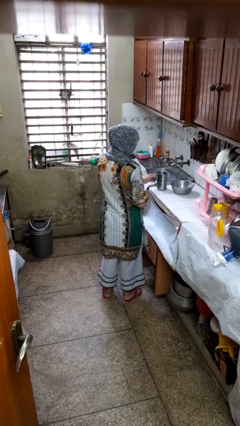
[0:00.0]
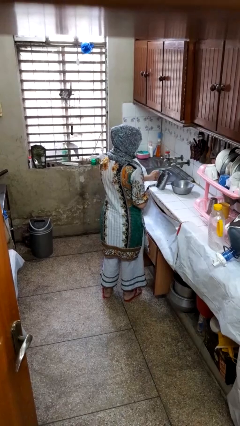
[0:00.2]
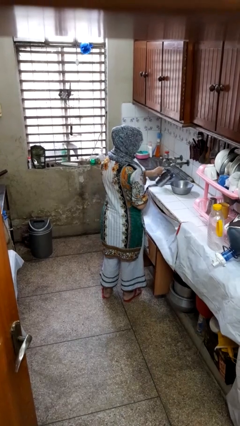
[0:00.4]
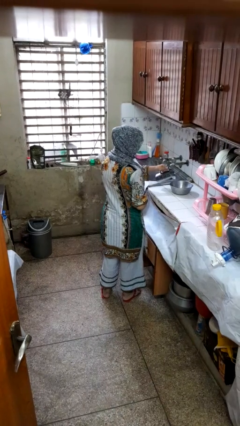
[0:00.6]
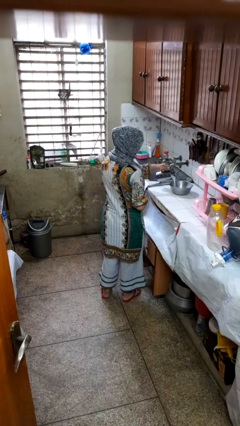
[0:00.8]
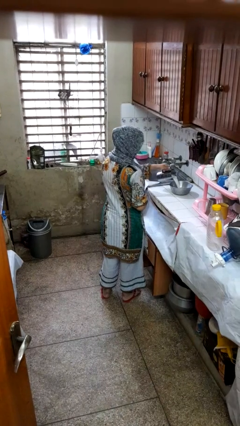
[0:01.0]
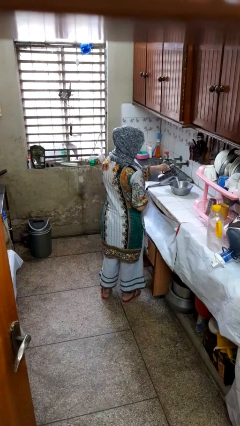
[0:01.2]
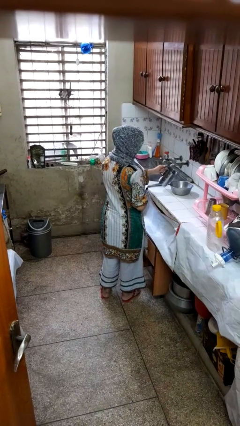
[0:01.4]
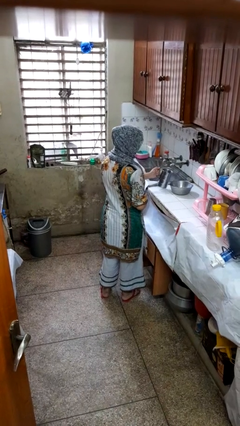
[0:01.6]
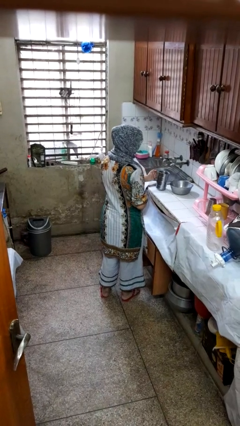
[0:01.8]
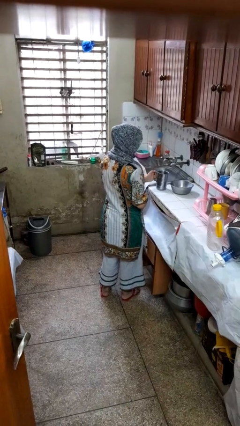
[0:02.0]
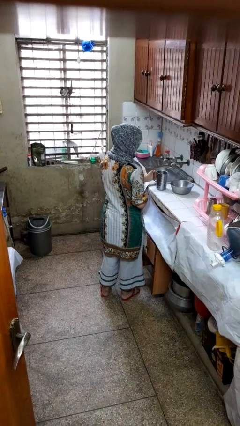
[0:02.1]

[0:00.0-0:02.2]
person pours into bowl

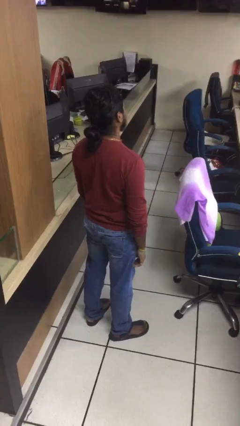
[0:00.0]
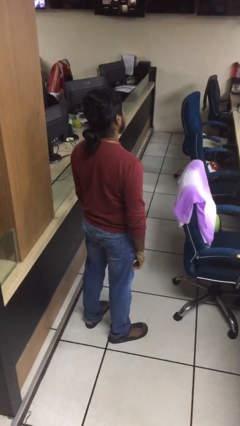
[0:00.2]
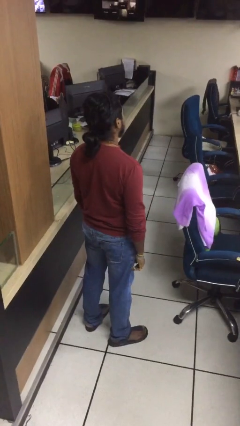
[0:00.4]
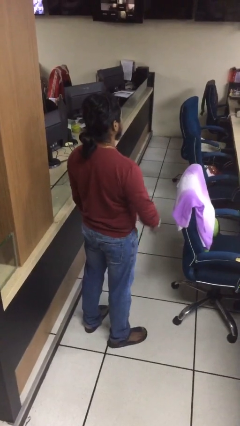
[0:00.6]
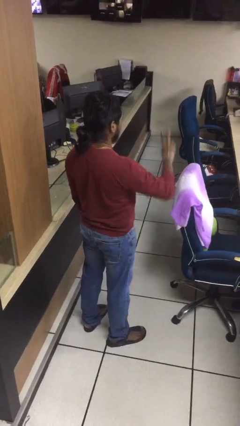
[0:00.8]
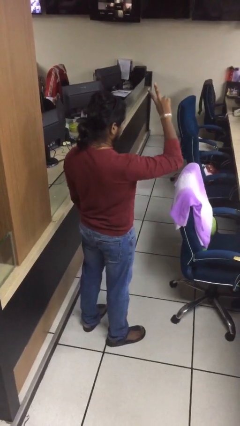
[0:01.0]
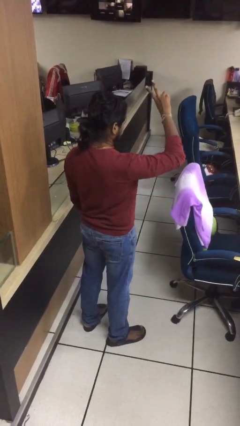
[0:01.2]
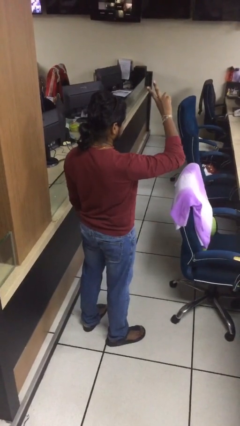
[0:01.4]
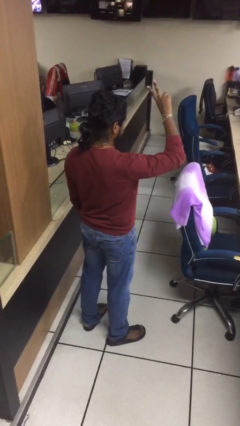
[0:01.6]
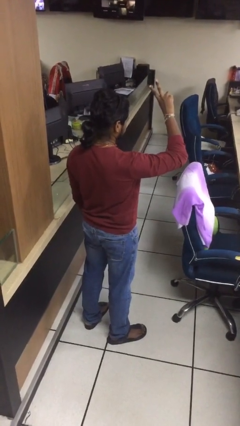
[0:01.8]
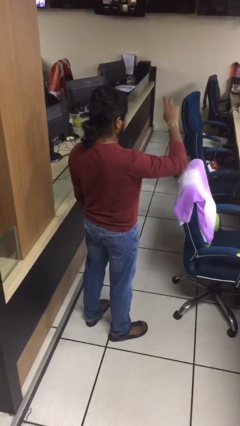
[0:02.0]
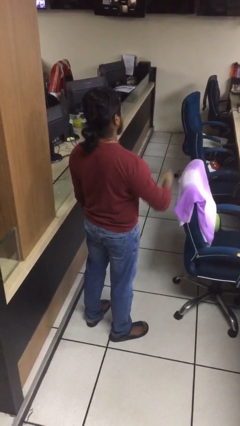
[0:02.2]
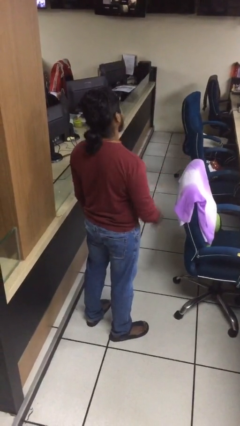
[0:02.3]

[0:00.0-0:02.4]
person gestures peace

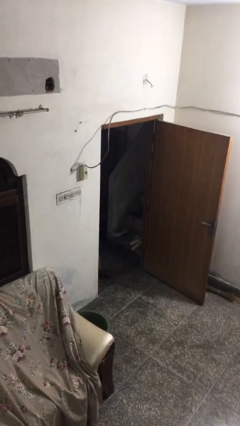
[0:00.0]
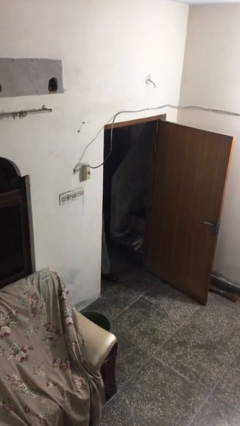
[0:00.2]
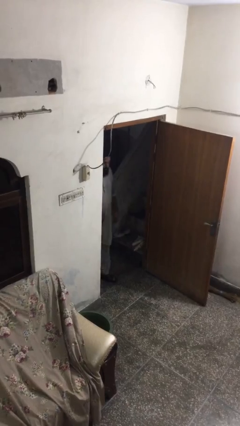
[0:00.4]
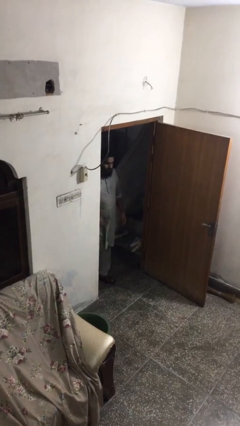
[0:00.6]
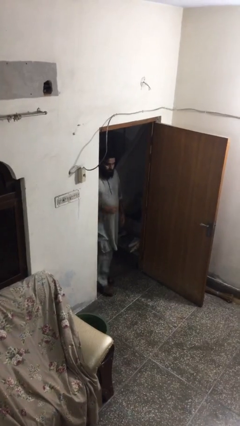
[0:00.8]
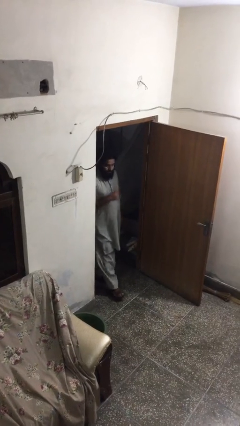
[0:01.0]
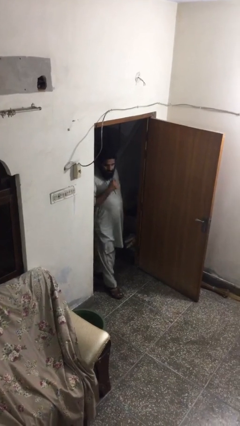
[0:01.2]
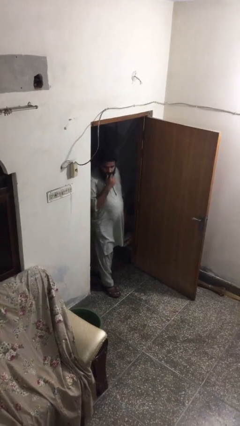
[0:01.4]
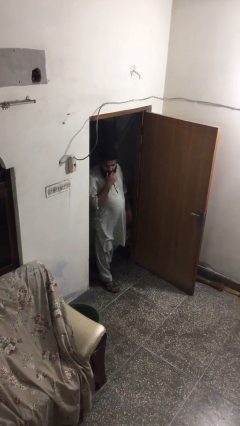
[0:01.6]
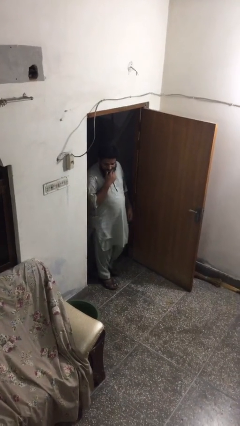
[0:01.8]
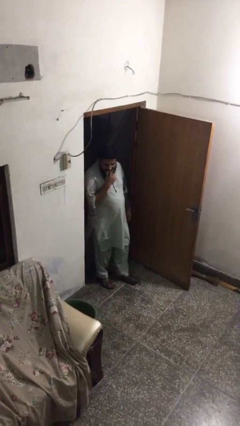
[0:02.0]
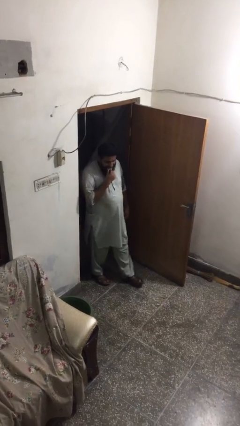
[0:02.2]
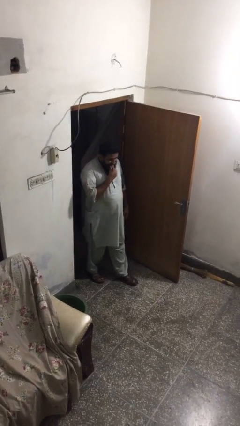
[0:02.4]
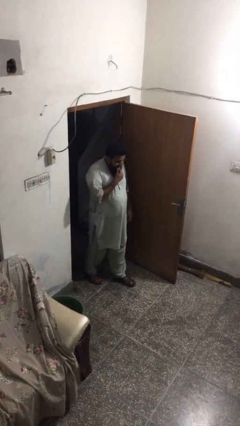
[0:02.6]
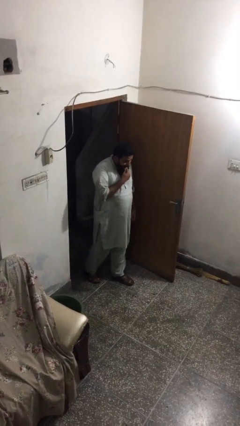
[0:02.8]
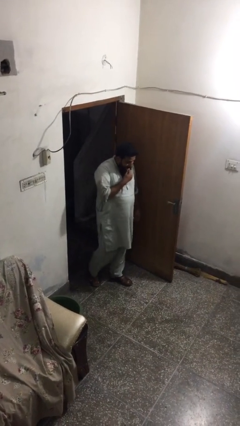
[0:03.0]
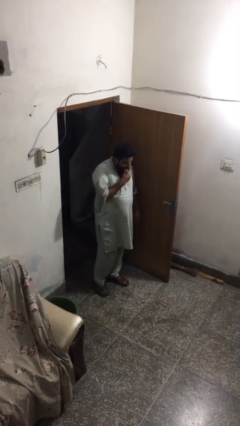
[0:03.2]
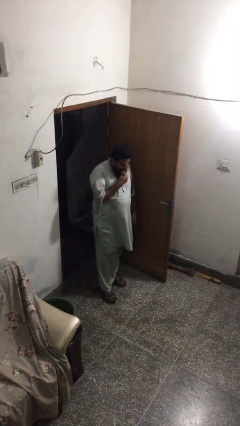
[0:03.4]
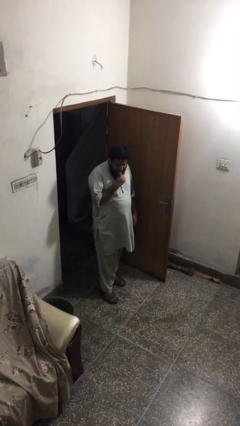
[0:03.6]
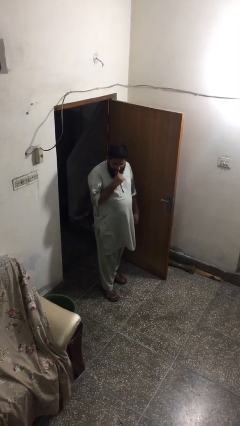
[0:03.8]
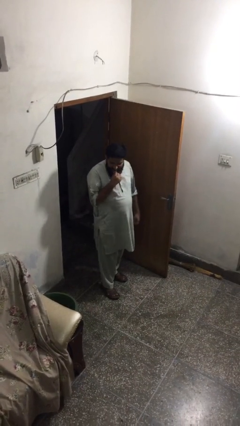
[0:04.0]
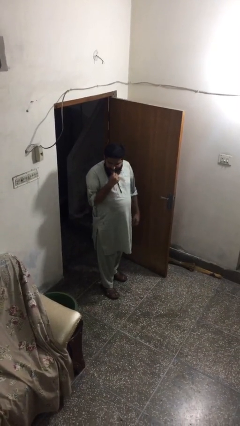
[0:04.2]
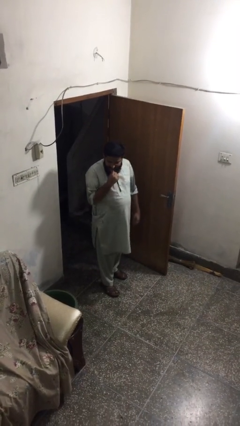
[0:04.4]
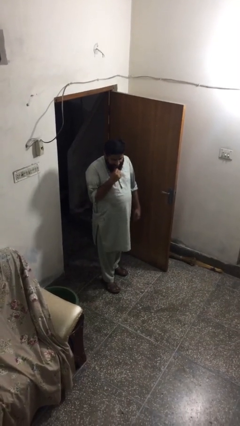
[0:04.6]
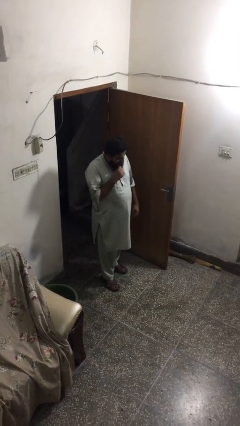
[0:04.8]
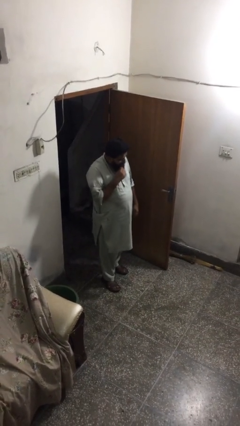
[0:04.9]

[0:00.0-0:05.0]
person enters scene through structure

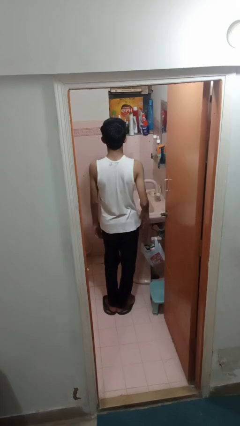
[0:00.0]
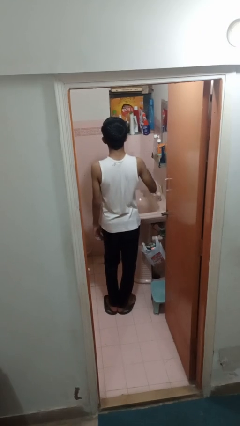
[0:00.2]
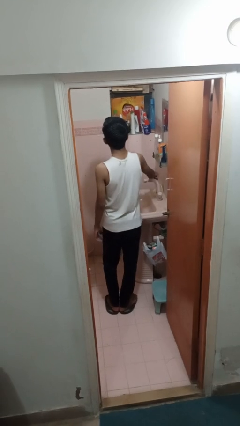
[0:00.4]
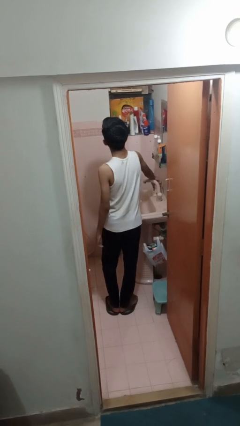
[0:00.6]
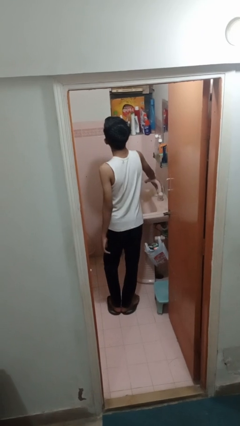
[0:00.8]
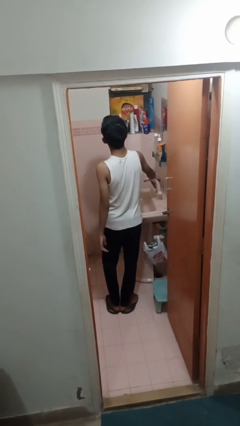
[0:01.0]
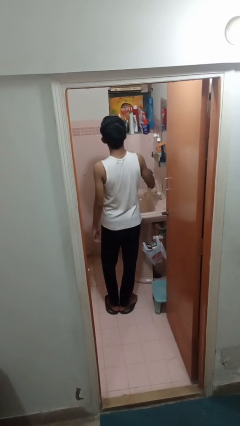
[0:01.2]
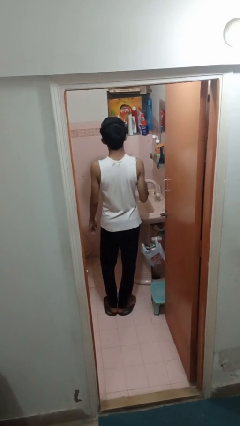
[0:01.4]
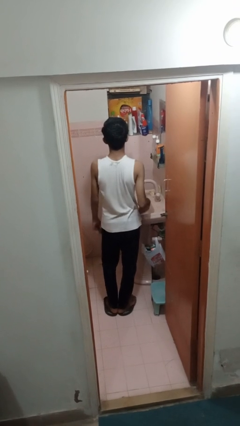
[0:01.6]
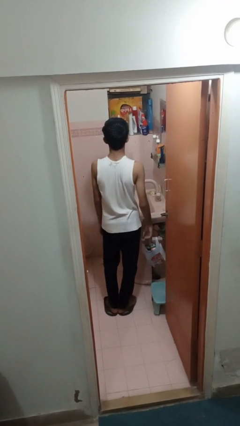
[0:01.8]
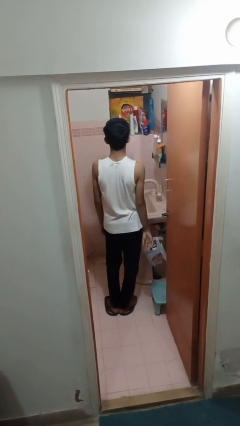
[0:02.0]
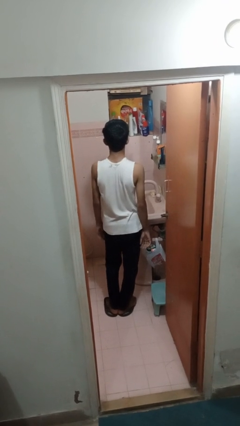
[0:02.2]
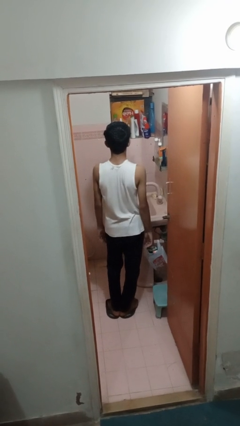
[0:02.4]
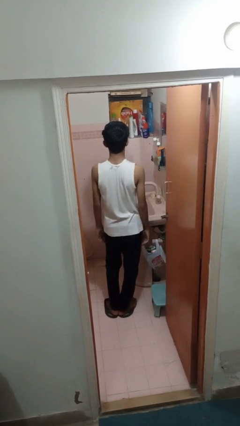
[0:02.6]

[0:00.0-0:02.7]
person turns on faucet

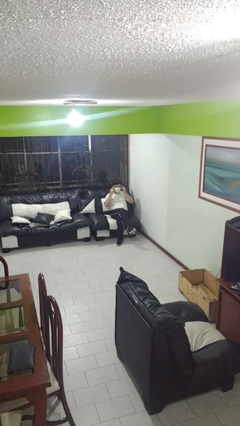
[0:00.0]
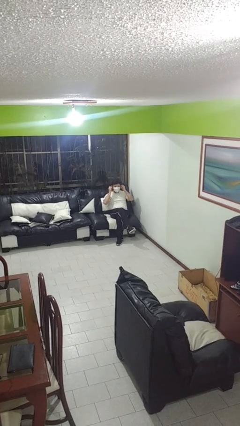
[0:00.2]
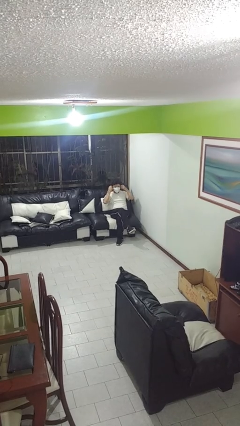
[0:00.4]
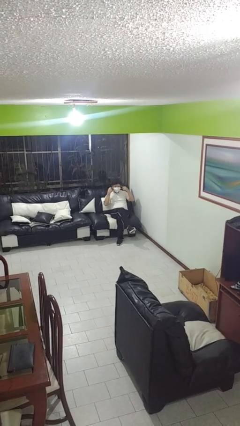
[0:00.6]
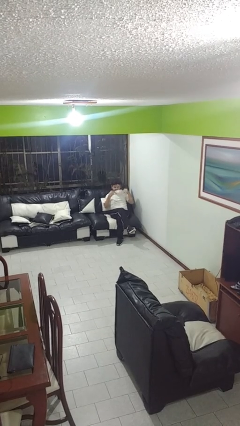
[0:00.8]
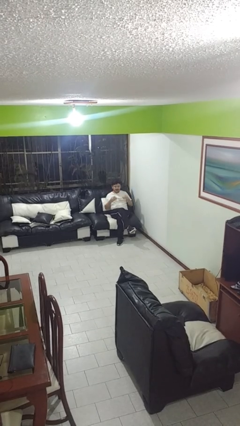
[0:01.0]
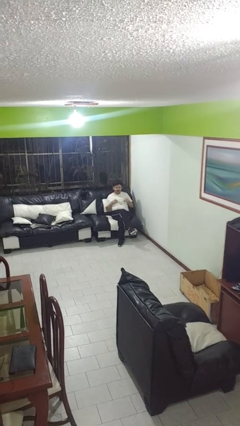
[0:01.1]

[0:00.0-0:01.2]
person takes off facemask

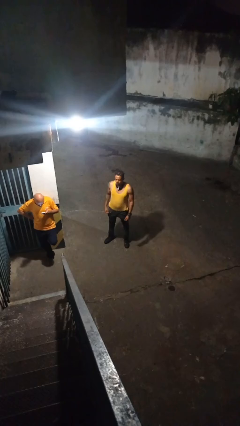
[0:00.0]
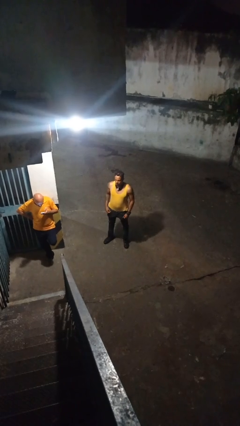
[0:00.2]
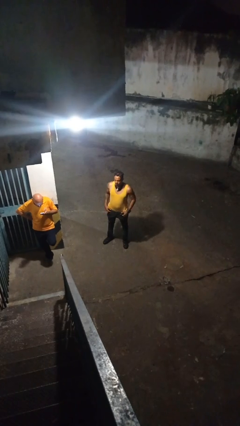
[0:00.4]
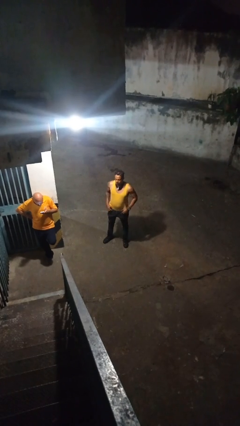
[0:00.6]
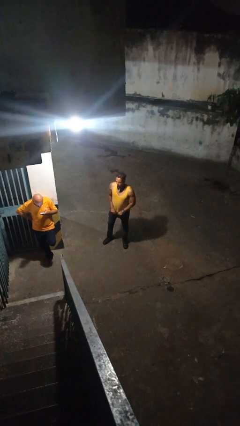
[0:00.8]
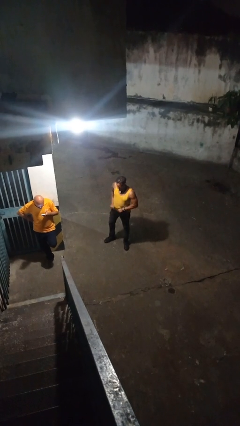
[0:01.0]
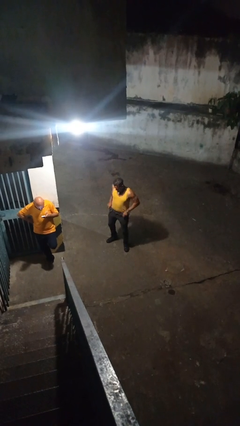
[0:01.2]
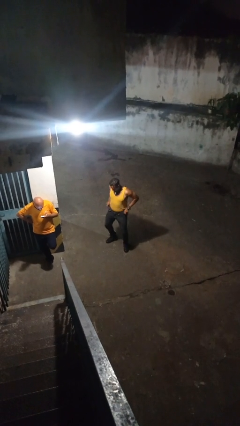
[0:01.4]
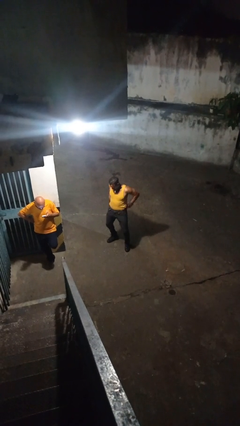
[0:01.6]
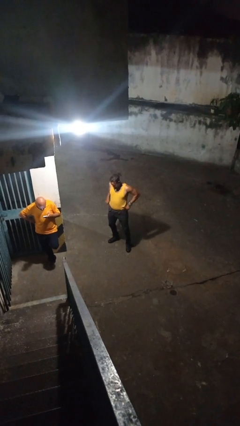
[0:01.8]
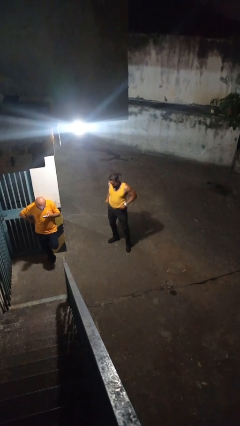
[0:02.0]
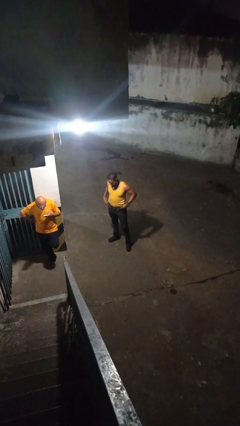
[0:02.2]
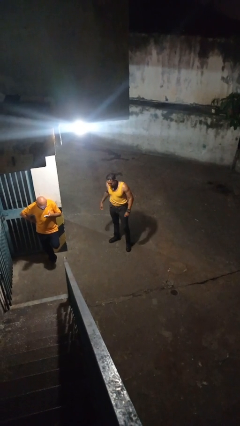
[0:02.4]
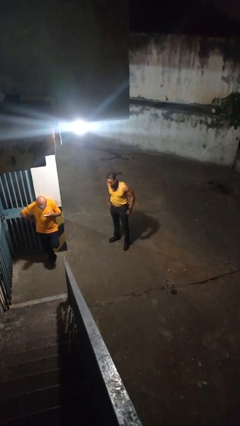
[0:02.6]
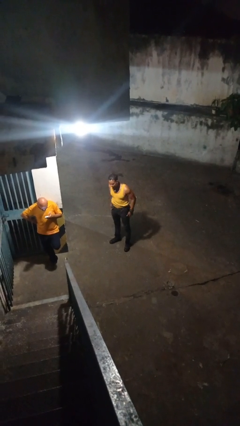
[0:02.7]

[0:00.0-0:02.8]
person hikes up pants

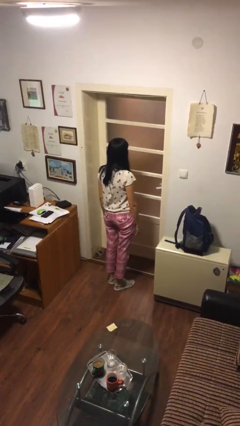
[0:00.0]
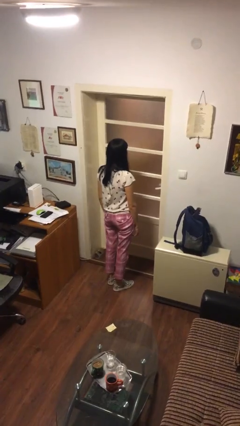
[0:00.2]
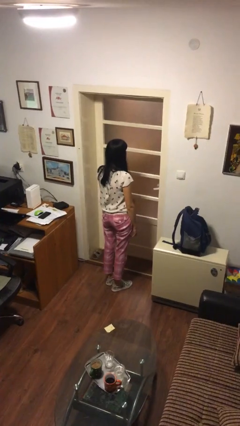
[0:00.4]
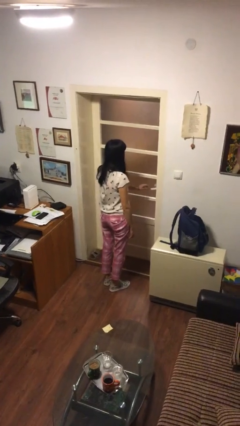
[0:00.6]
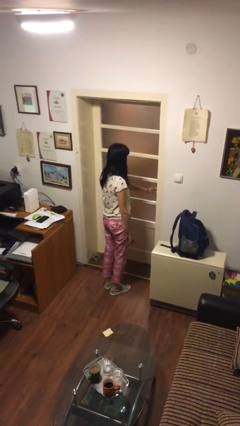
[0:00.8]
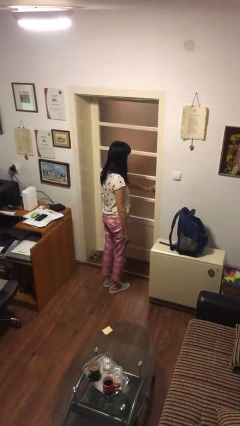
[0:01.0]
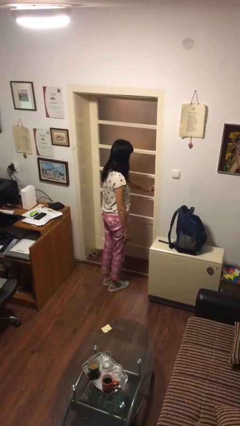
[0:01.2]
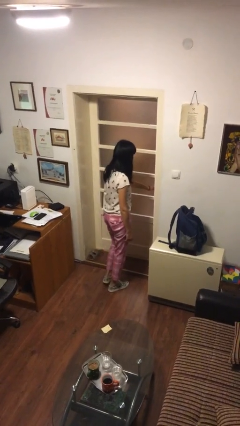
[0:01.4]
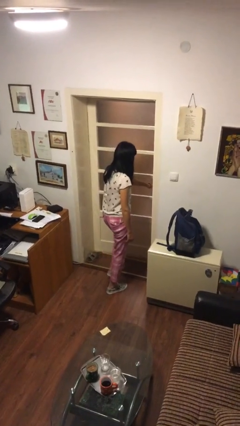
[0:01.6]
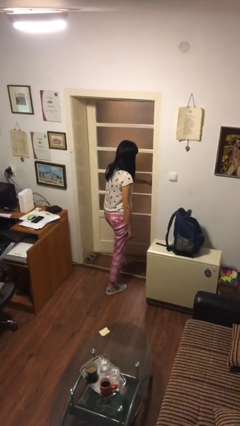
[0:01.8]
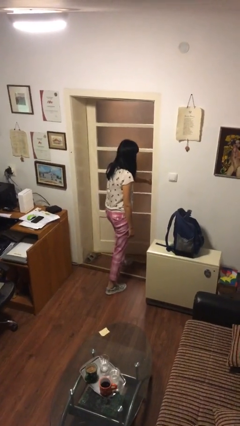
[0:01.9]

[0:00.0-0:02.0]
person opens facility door
